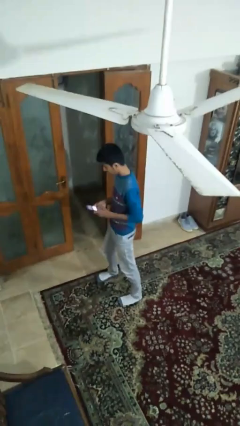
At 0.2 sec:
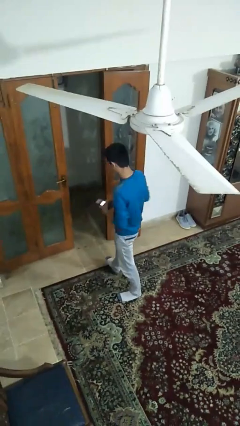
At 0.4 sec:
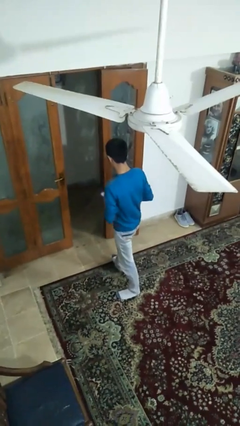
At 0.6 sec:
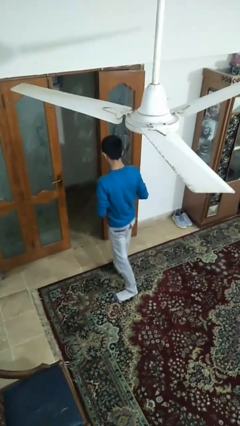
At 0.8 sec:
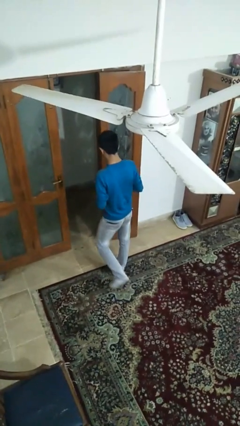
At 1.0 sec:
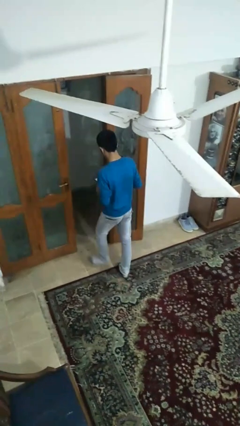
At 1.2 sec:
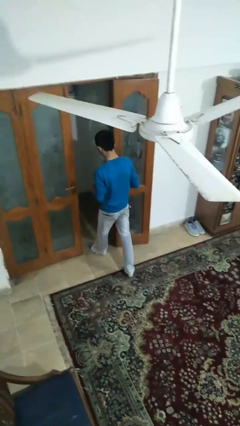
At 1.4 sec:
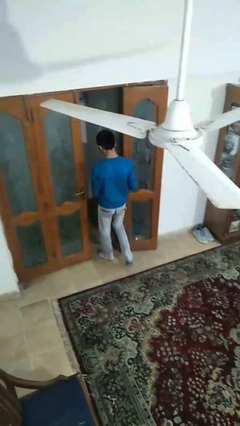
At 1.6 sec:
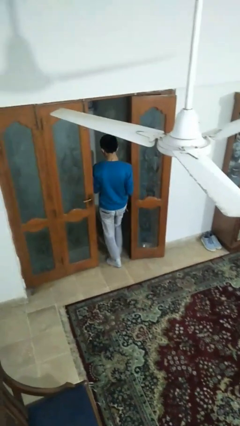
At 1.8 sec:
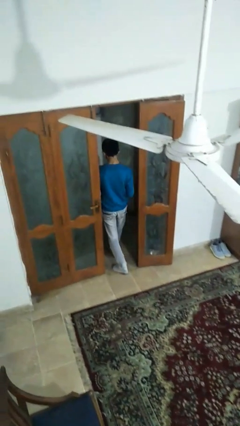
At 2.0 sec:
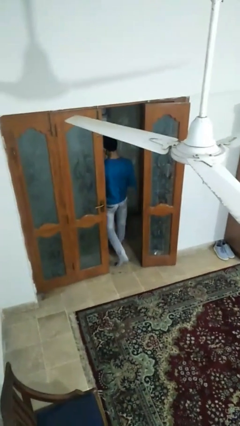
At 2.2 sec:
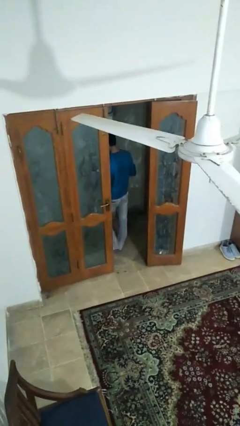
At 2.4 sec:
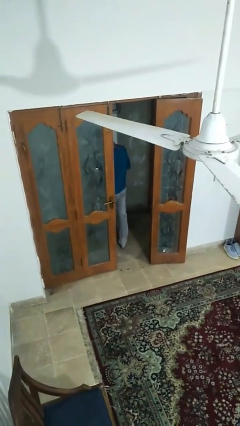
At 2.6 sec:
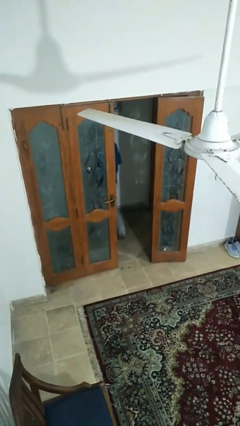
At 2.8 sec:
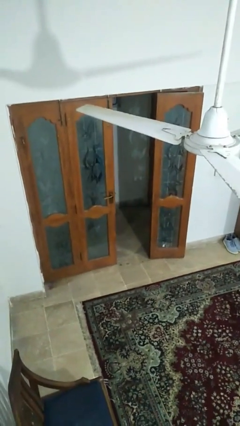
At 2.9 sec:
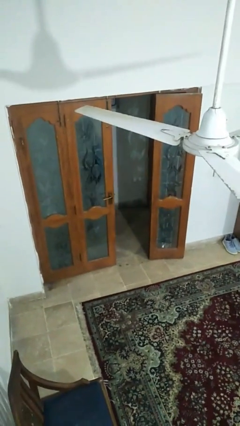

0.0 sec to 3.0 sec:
person closes facility door

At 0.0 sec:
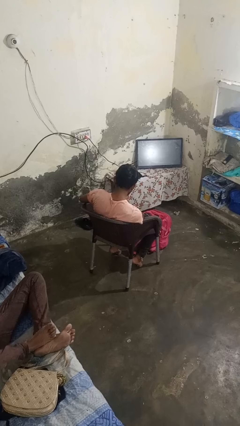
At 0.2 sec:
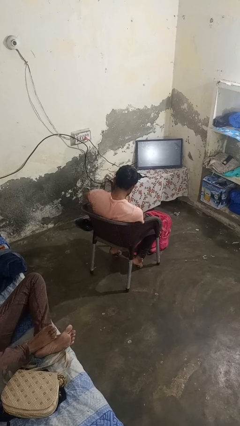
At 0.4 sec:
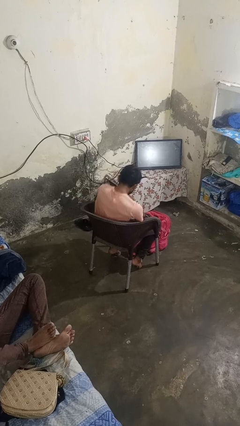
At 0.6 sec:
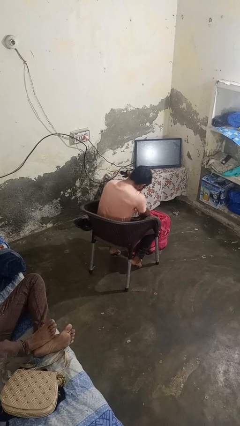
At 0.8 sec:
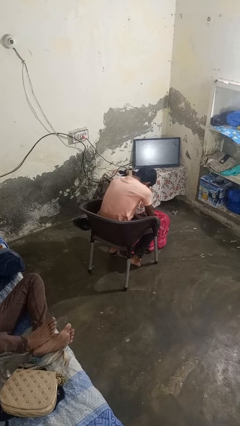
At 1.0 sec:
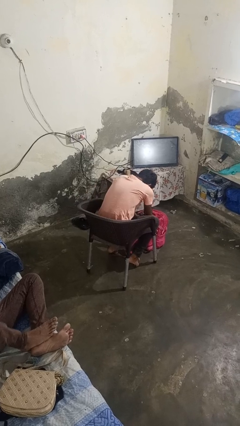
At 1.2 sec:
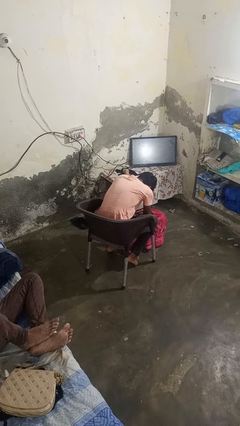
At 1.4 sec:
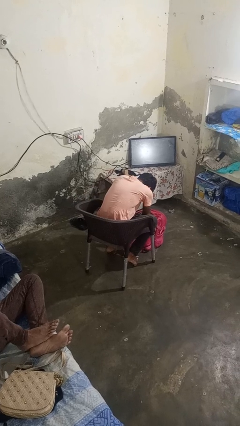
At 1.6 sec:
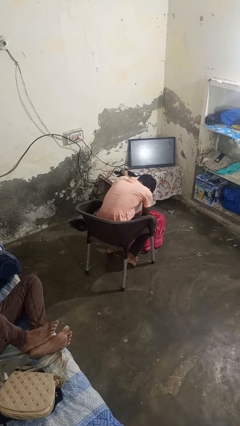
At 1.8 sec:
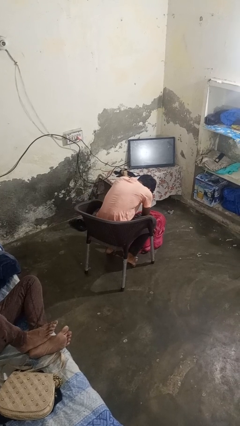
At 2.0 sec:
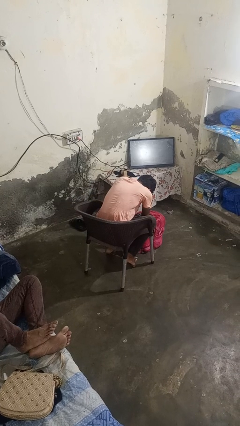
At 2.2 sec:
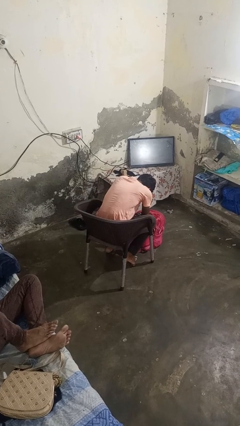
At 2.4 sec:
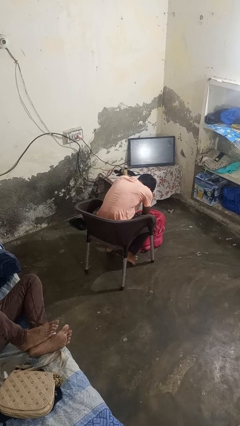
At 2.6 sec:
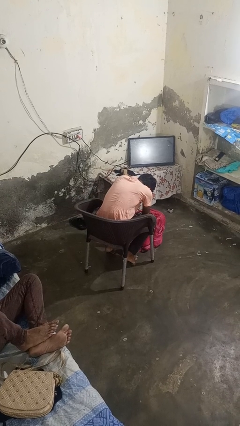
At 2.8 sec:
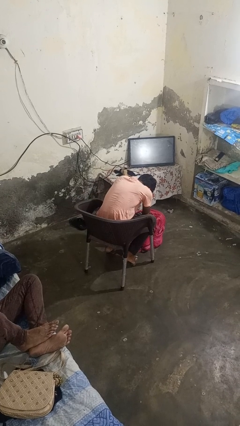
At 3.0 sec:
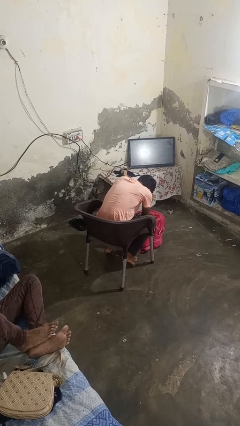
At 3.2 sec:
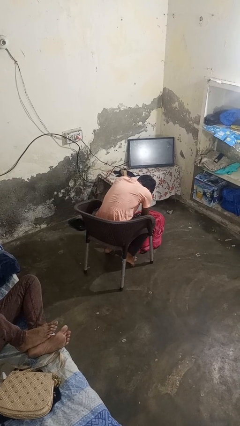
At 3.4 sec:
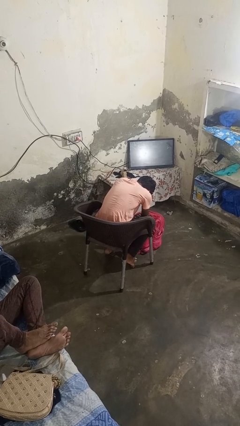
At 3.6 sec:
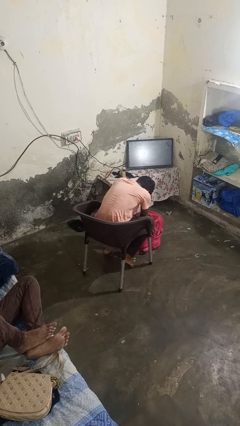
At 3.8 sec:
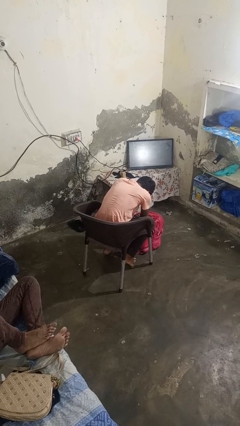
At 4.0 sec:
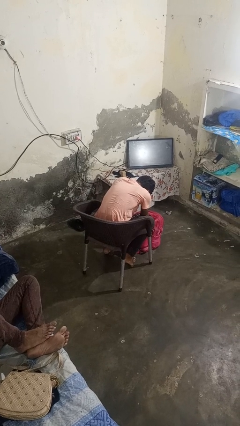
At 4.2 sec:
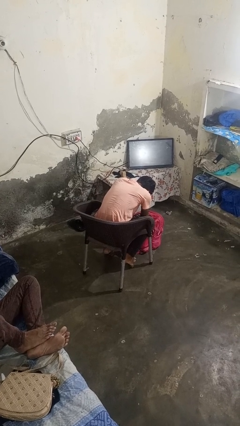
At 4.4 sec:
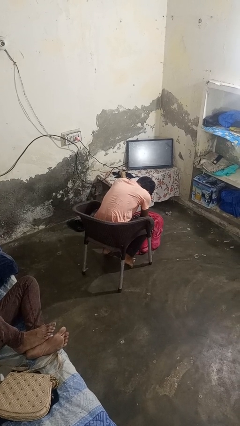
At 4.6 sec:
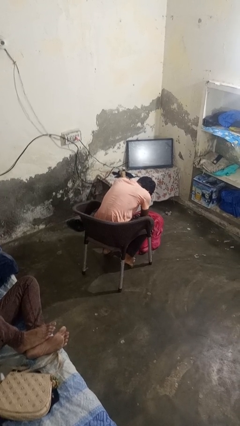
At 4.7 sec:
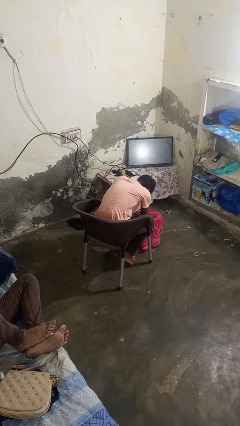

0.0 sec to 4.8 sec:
person searches in backpack

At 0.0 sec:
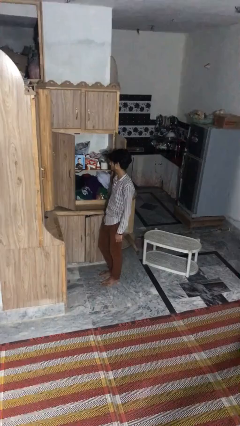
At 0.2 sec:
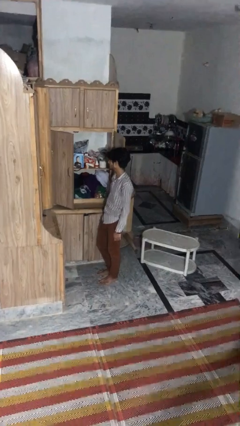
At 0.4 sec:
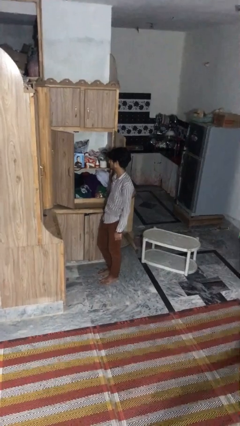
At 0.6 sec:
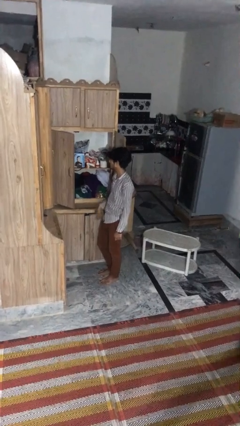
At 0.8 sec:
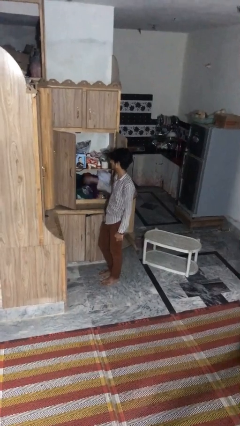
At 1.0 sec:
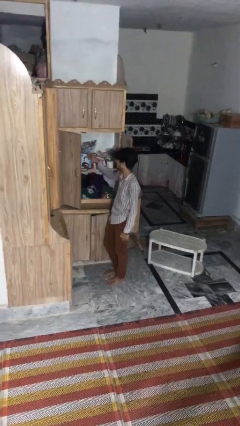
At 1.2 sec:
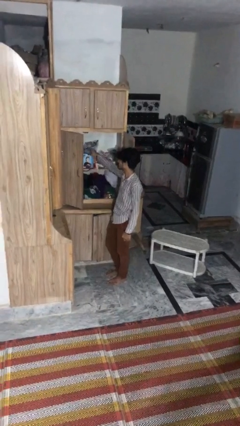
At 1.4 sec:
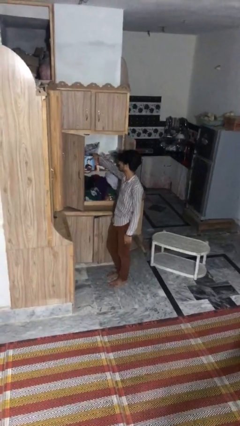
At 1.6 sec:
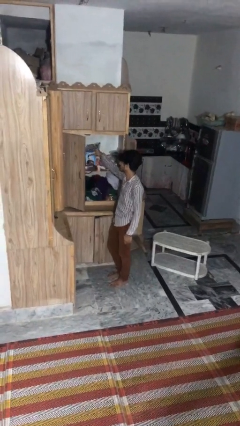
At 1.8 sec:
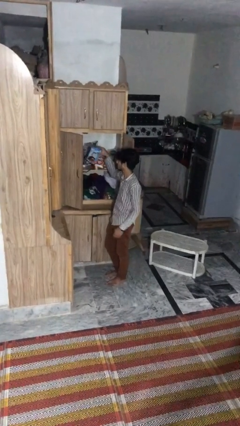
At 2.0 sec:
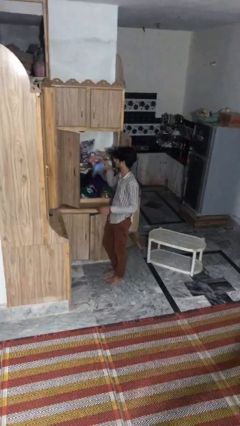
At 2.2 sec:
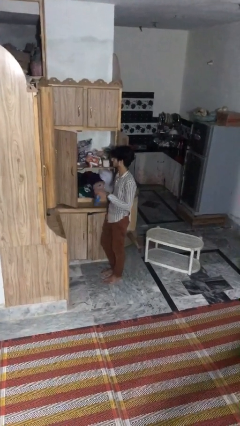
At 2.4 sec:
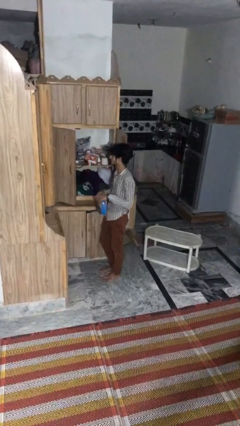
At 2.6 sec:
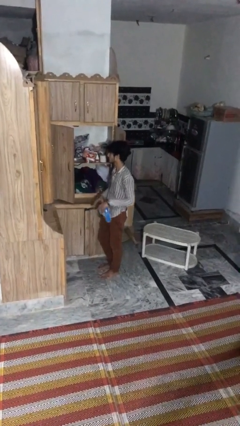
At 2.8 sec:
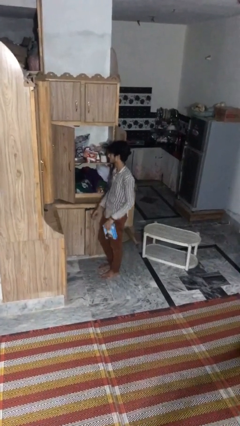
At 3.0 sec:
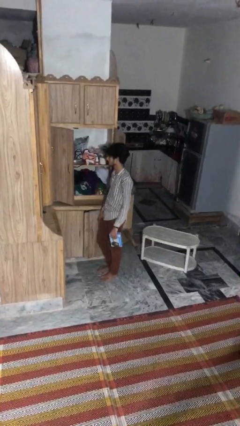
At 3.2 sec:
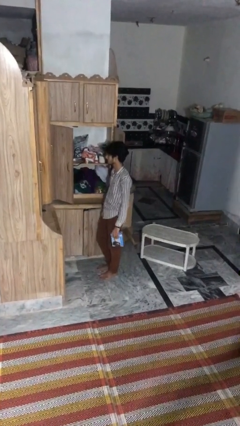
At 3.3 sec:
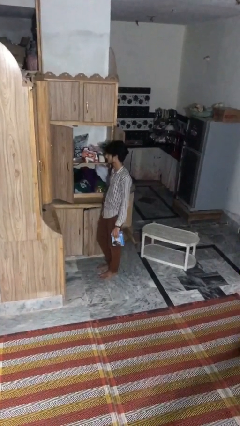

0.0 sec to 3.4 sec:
person picks up object from cabinet

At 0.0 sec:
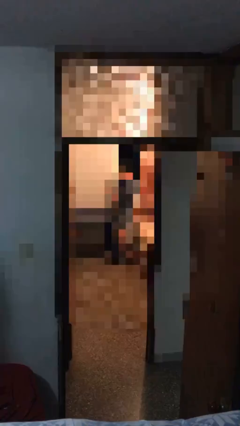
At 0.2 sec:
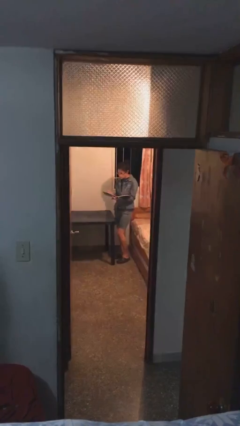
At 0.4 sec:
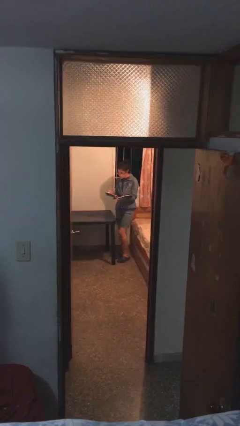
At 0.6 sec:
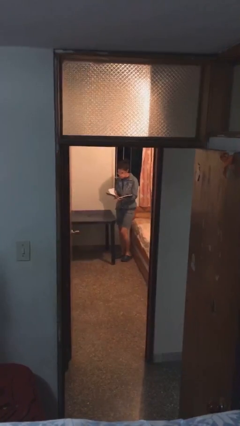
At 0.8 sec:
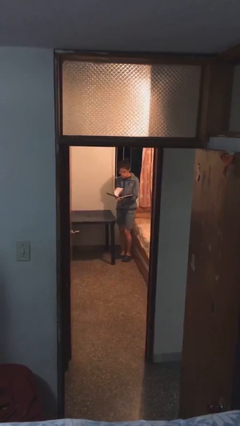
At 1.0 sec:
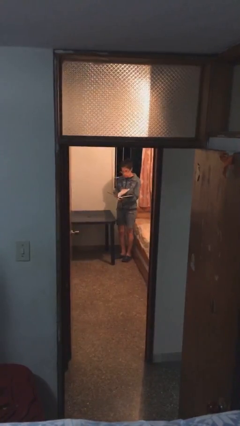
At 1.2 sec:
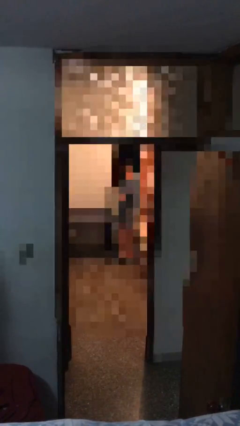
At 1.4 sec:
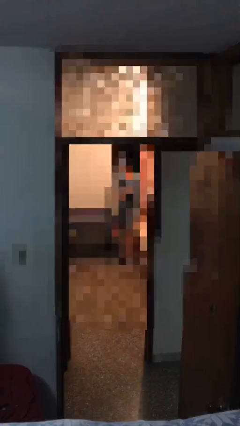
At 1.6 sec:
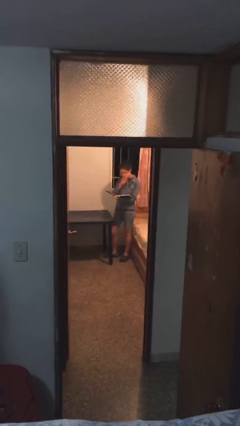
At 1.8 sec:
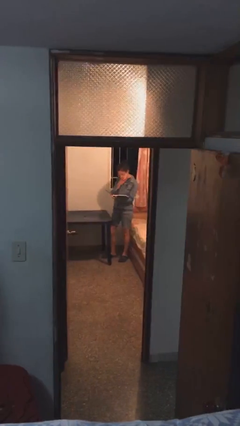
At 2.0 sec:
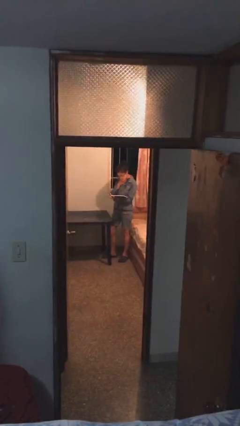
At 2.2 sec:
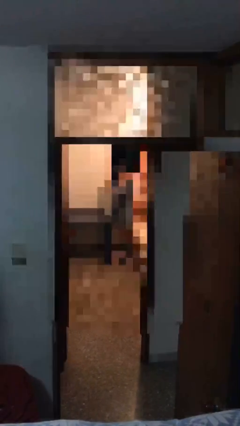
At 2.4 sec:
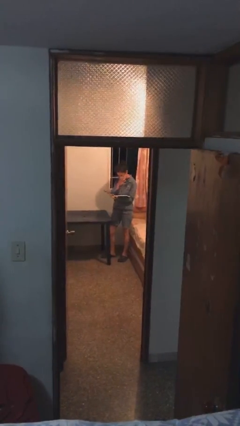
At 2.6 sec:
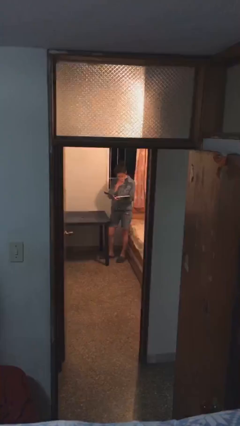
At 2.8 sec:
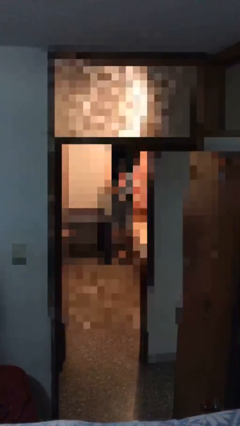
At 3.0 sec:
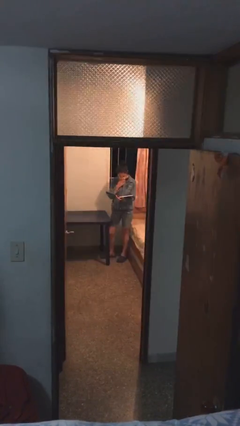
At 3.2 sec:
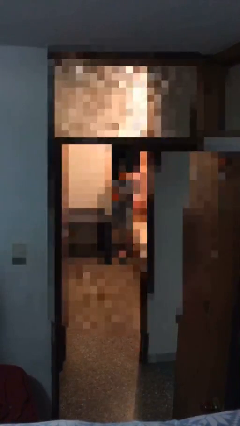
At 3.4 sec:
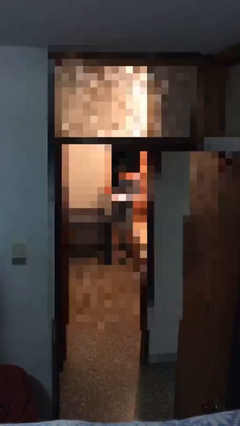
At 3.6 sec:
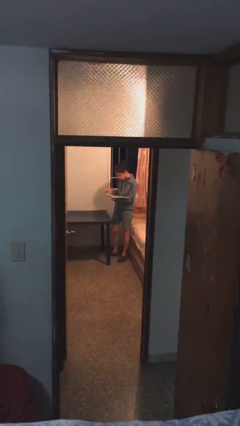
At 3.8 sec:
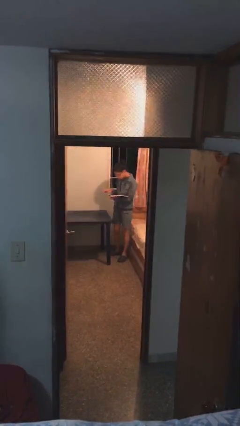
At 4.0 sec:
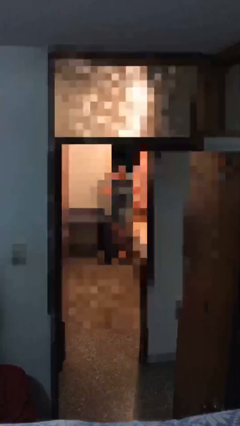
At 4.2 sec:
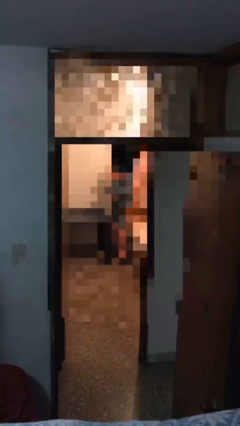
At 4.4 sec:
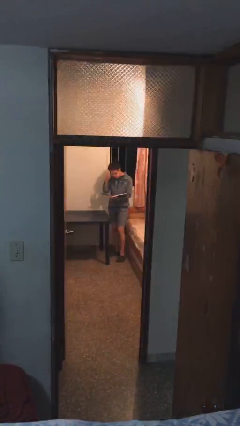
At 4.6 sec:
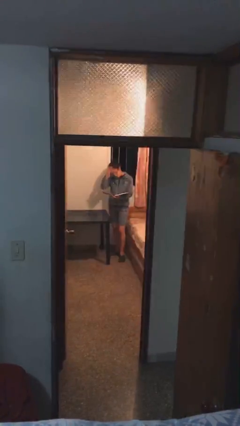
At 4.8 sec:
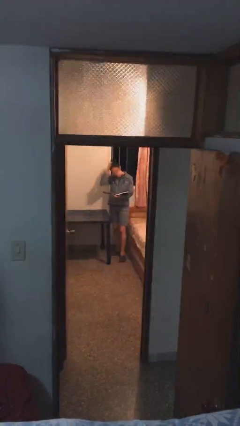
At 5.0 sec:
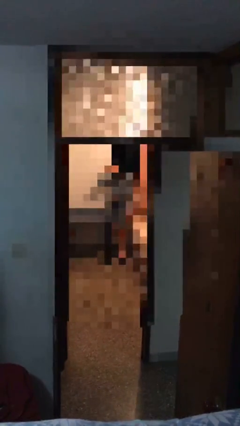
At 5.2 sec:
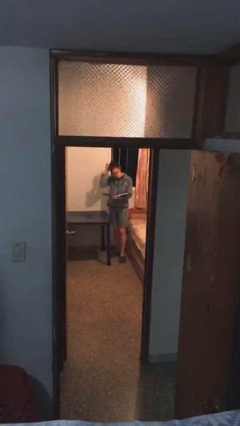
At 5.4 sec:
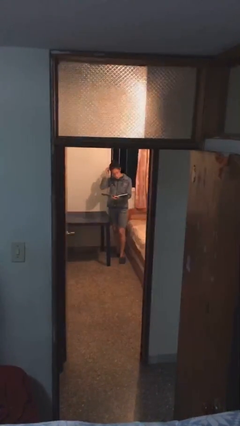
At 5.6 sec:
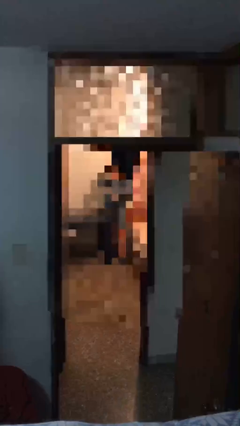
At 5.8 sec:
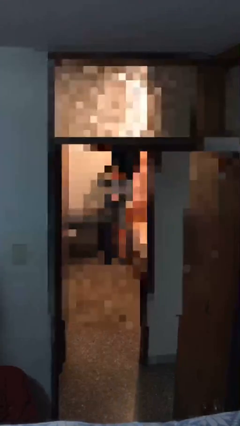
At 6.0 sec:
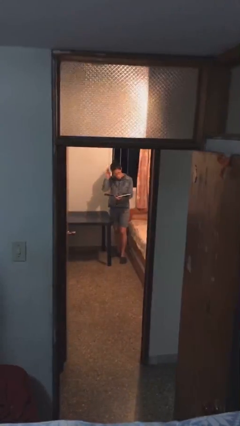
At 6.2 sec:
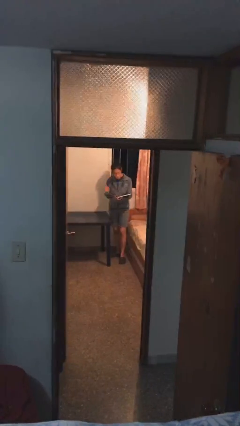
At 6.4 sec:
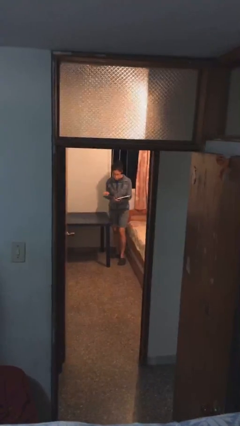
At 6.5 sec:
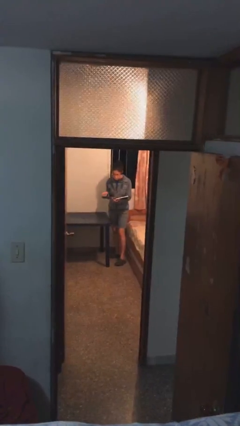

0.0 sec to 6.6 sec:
person reads document
